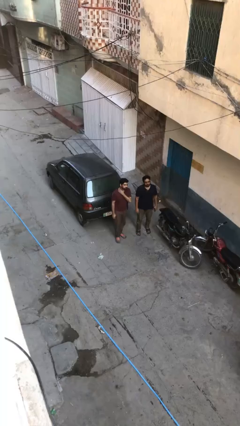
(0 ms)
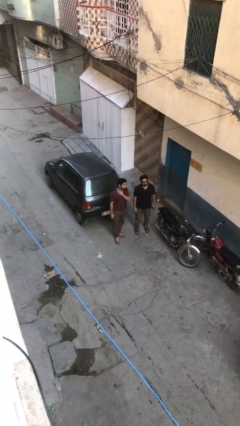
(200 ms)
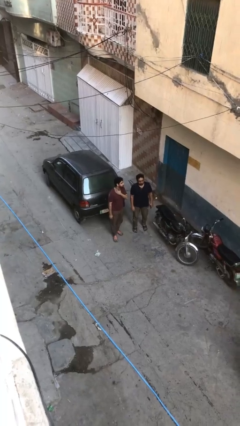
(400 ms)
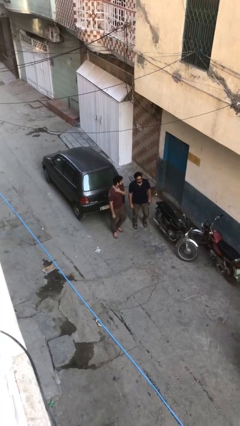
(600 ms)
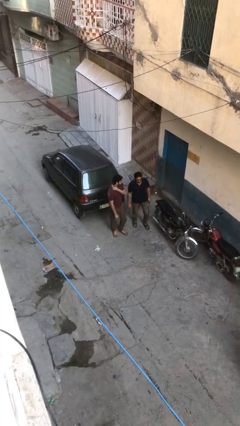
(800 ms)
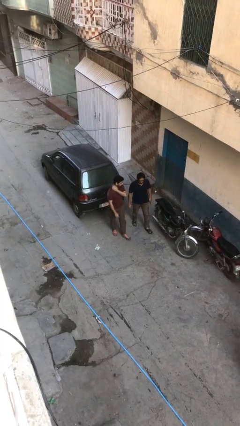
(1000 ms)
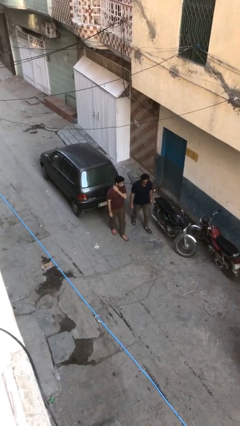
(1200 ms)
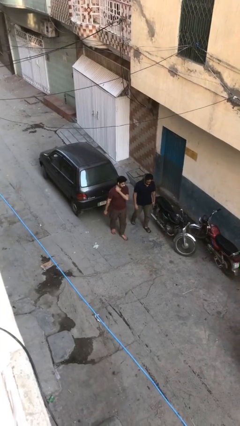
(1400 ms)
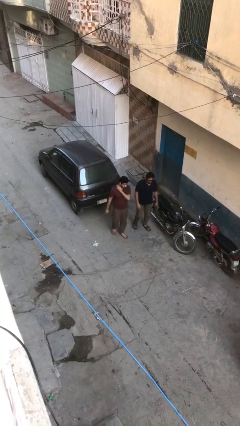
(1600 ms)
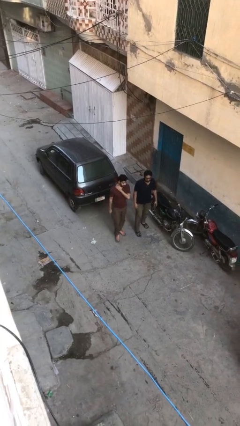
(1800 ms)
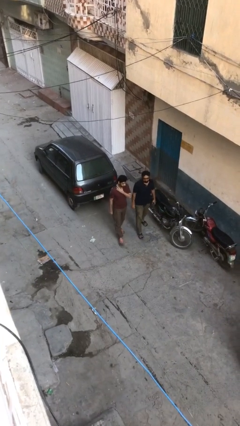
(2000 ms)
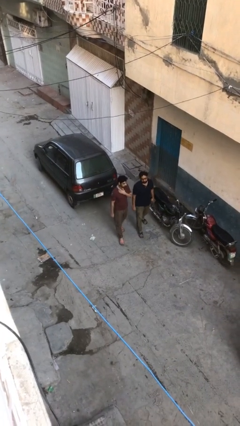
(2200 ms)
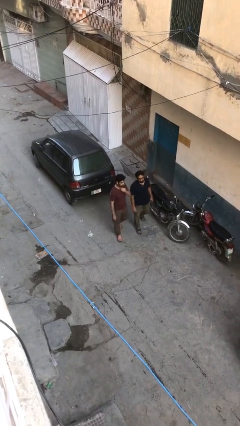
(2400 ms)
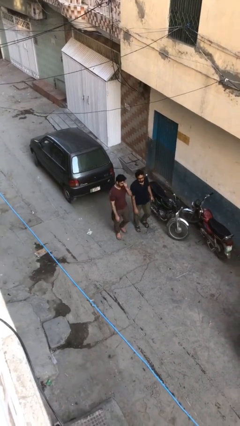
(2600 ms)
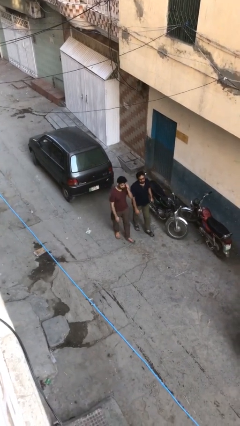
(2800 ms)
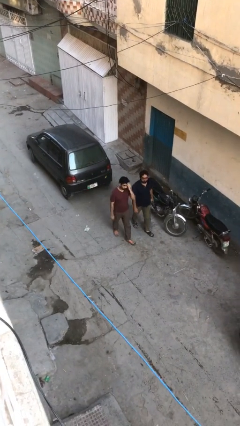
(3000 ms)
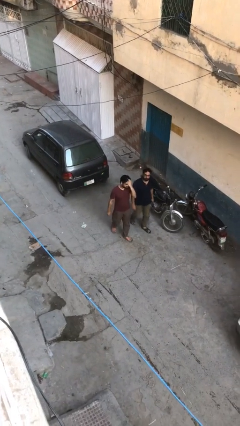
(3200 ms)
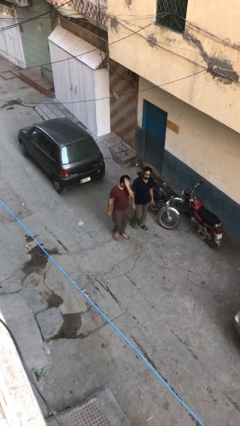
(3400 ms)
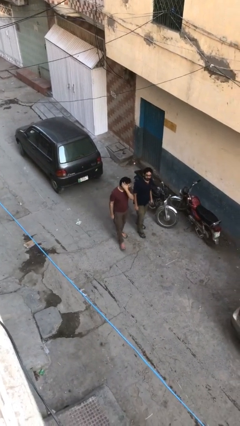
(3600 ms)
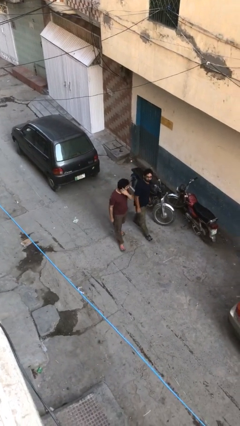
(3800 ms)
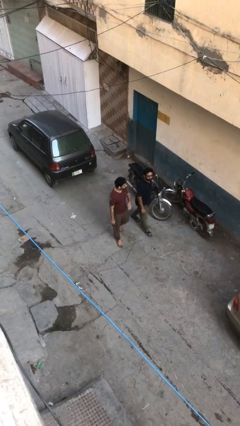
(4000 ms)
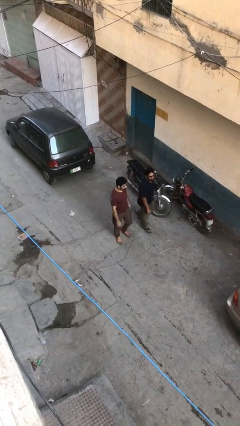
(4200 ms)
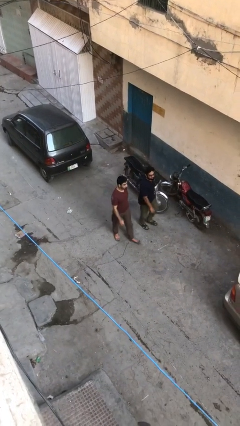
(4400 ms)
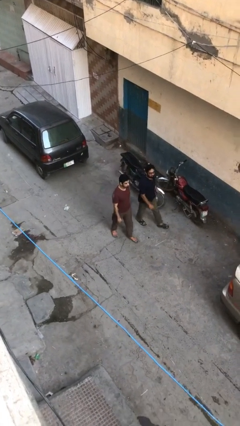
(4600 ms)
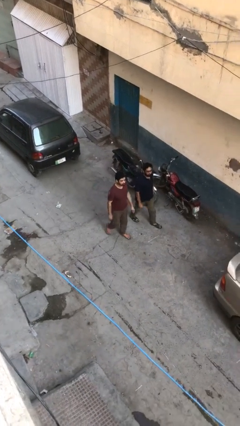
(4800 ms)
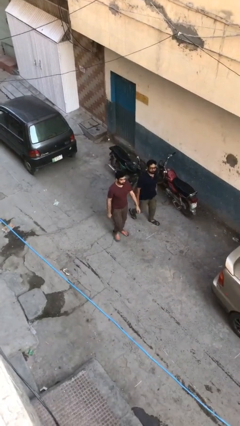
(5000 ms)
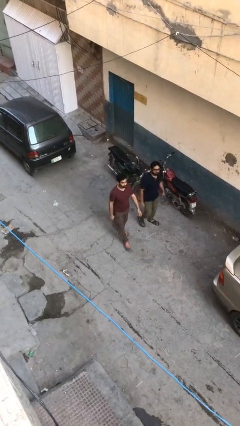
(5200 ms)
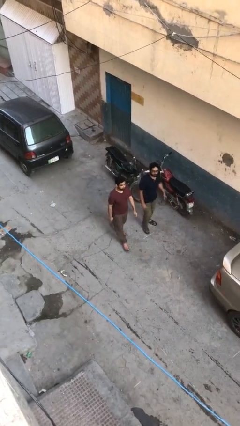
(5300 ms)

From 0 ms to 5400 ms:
person talks to person

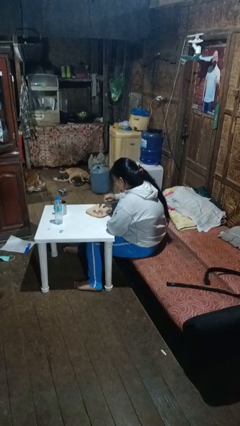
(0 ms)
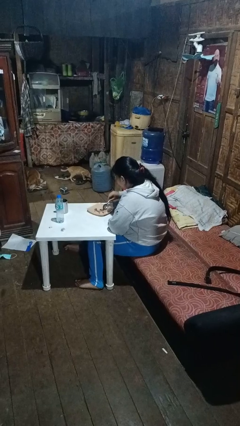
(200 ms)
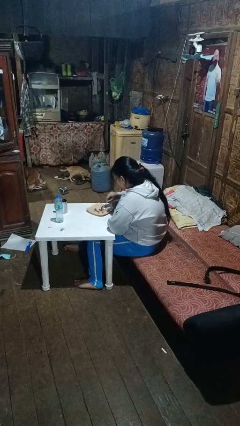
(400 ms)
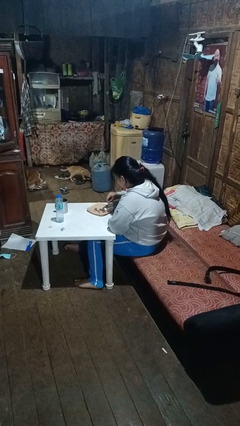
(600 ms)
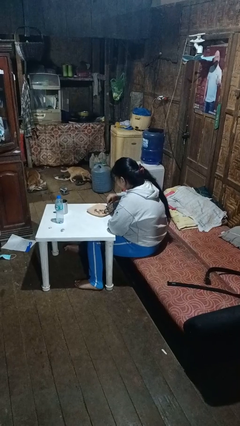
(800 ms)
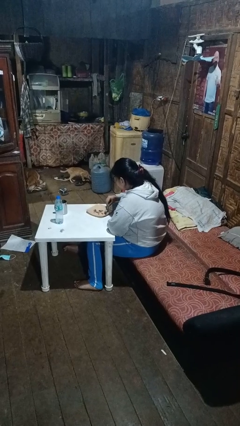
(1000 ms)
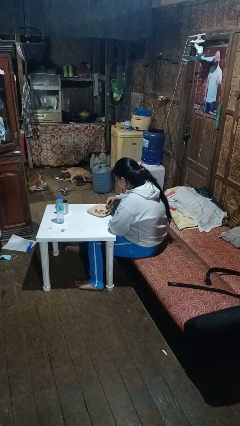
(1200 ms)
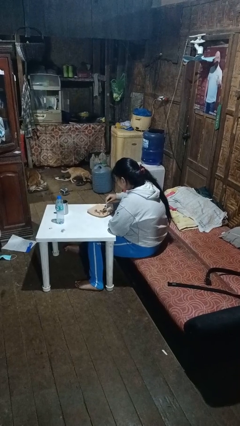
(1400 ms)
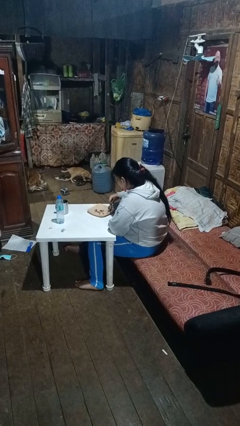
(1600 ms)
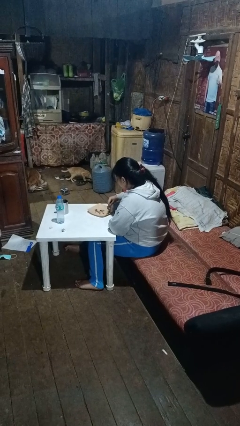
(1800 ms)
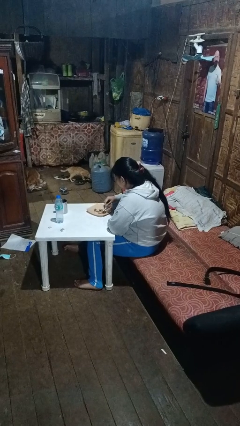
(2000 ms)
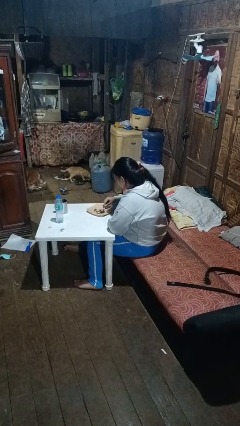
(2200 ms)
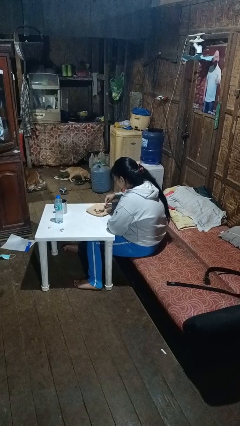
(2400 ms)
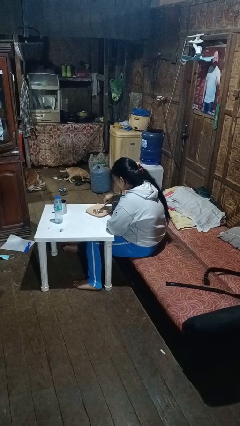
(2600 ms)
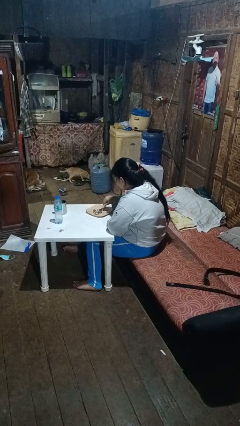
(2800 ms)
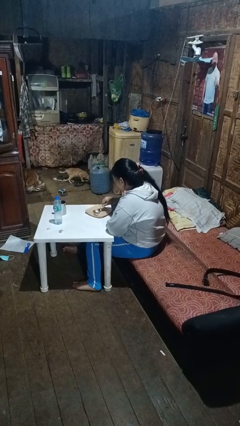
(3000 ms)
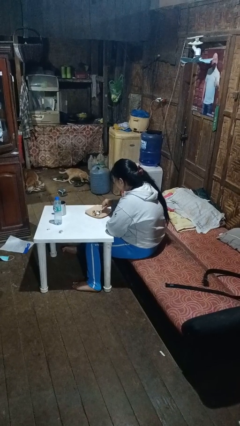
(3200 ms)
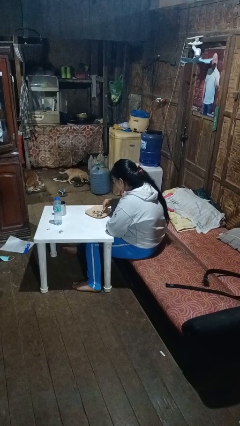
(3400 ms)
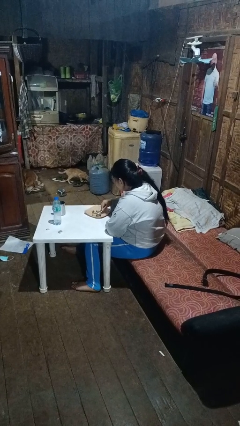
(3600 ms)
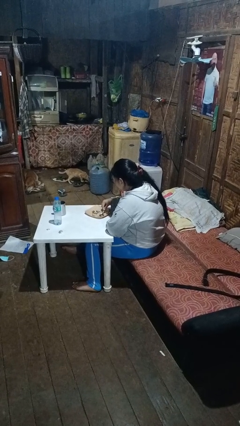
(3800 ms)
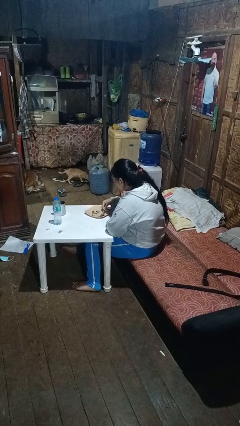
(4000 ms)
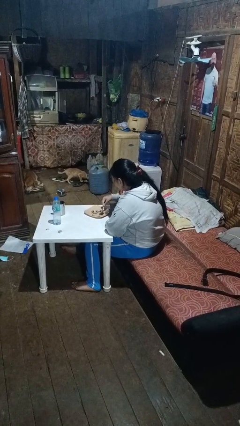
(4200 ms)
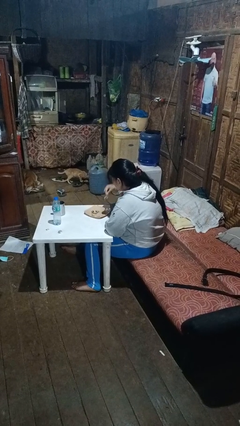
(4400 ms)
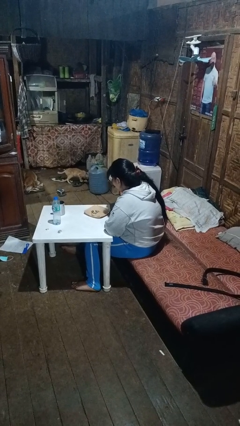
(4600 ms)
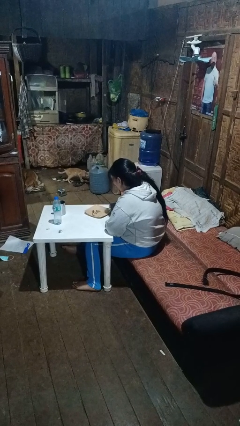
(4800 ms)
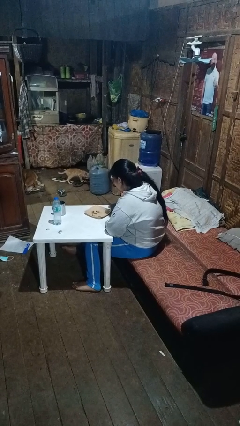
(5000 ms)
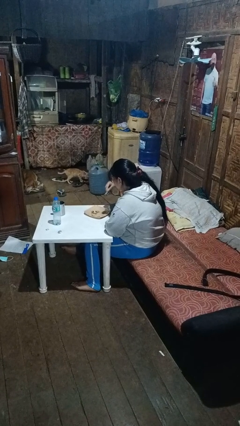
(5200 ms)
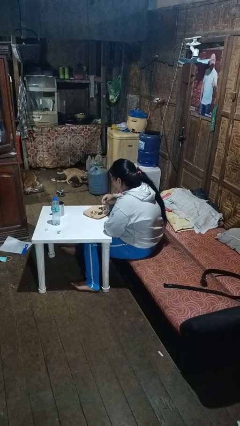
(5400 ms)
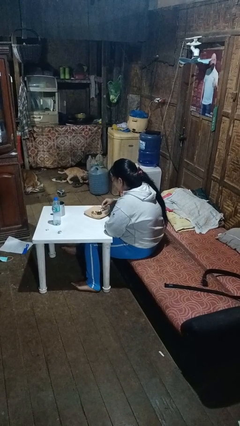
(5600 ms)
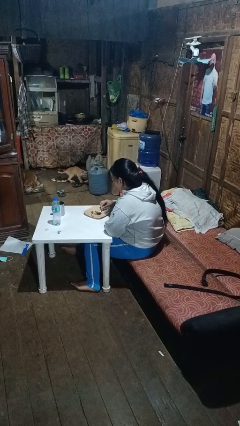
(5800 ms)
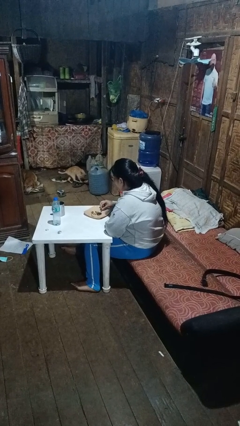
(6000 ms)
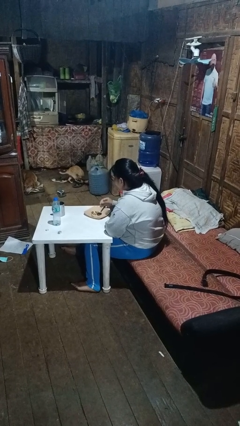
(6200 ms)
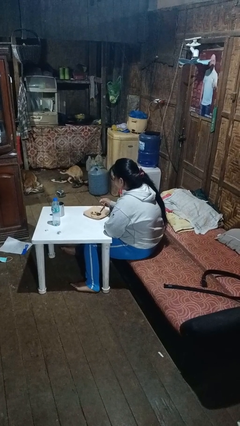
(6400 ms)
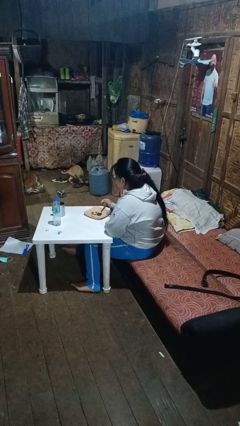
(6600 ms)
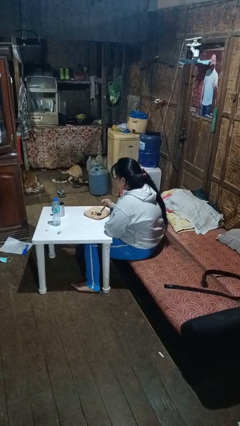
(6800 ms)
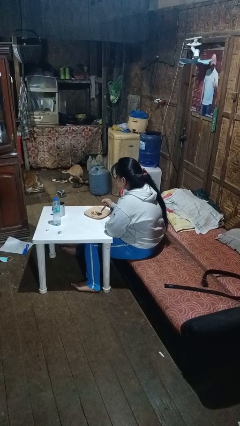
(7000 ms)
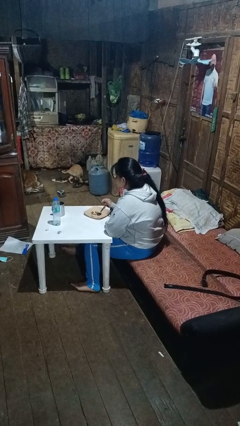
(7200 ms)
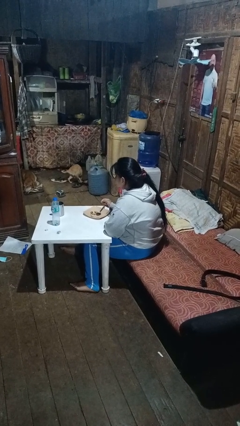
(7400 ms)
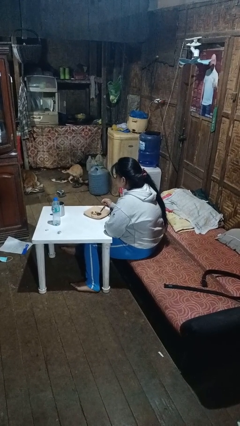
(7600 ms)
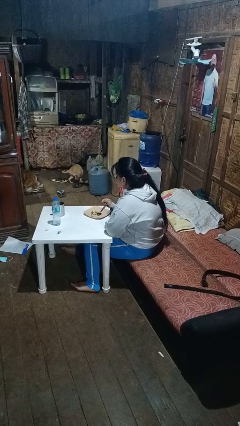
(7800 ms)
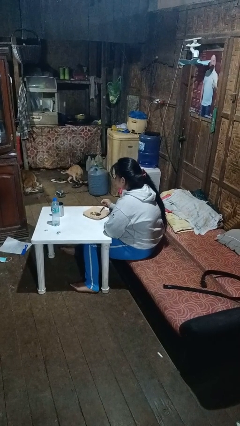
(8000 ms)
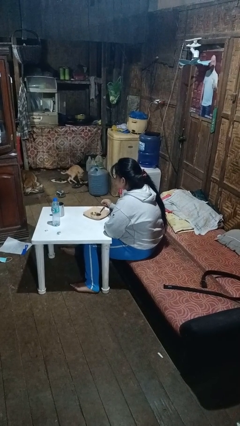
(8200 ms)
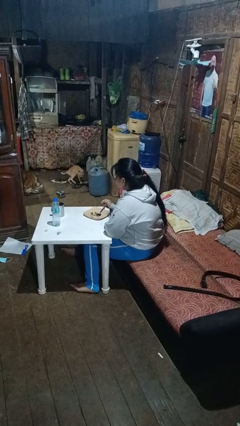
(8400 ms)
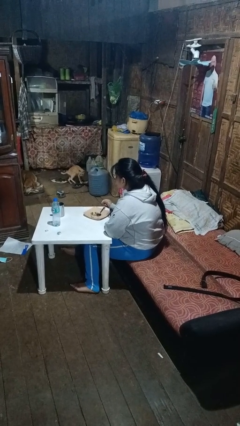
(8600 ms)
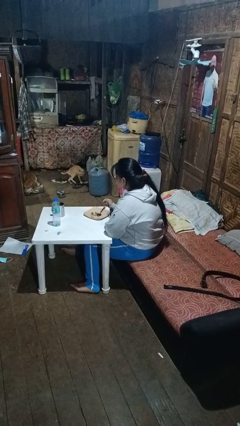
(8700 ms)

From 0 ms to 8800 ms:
person eats with utensil

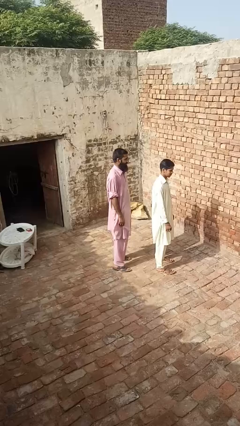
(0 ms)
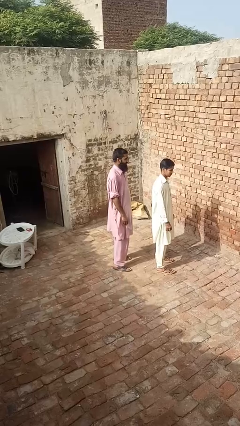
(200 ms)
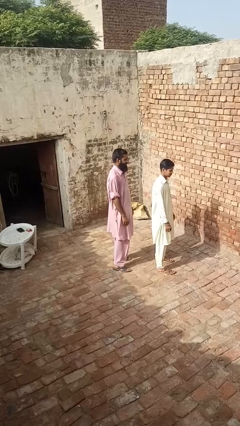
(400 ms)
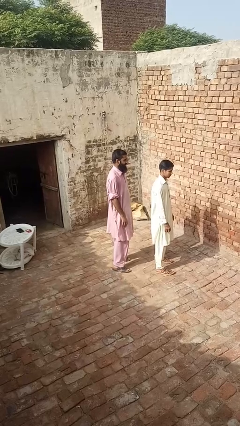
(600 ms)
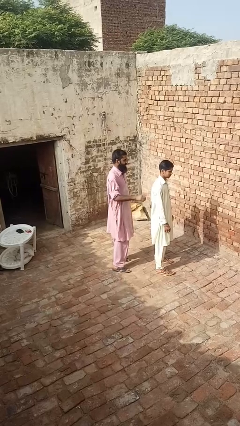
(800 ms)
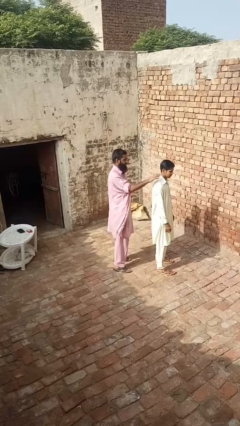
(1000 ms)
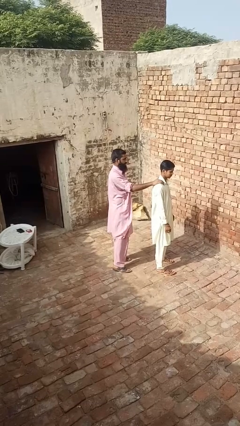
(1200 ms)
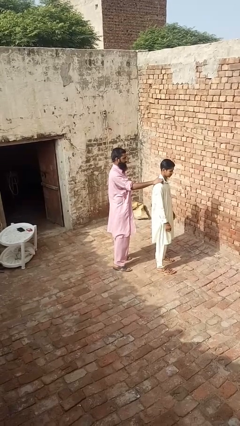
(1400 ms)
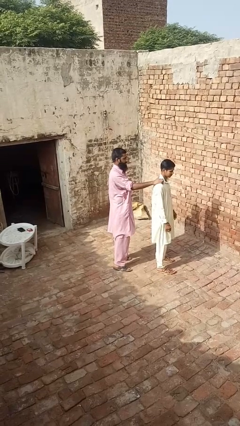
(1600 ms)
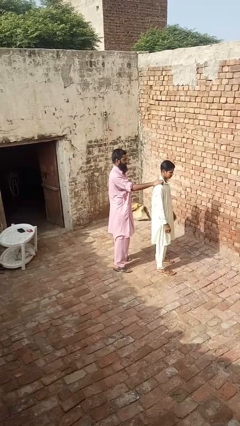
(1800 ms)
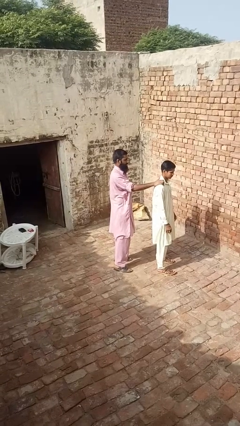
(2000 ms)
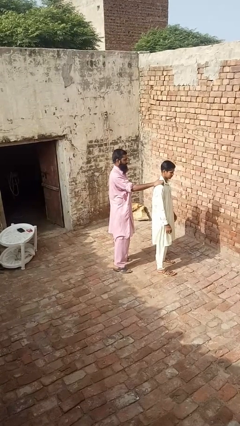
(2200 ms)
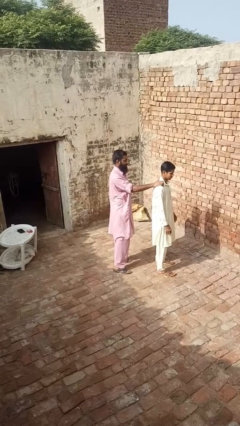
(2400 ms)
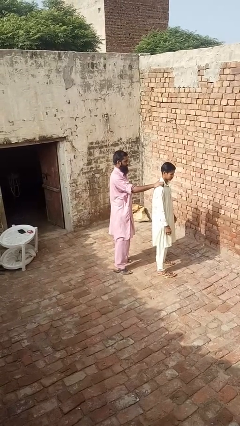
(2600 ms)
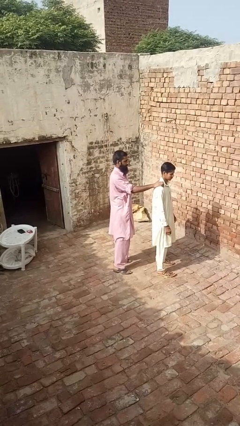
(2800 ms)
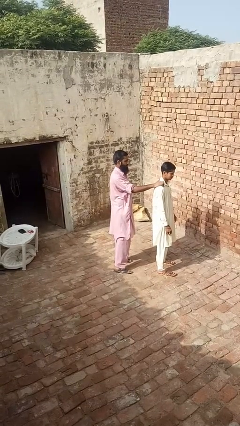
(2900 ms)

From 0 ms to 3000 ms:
person grabs person by shoulder

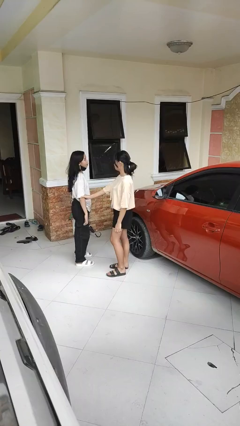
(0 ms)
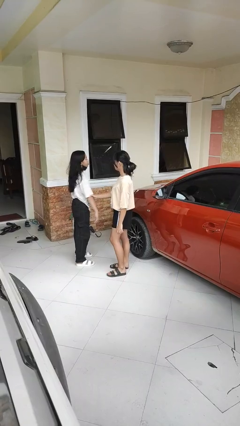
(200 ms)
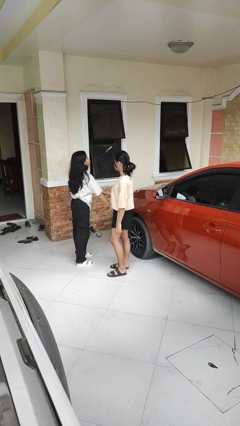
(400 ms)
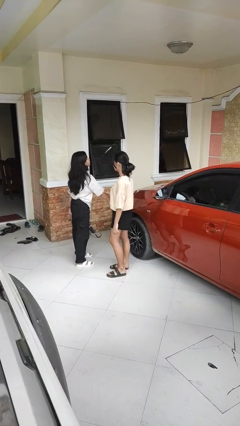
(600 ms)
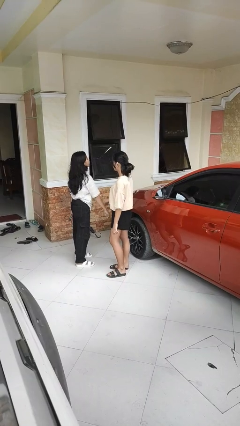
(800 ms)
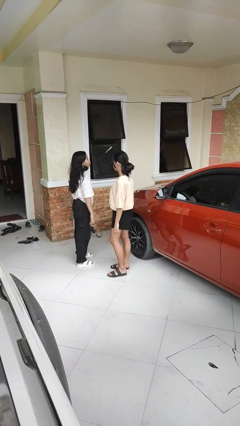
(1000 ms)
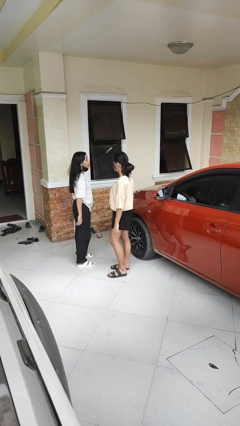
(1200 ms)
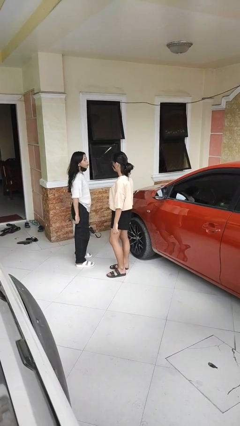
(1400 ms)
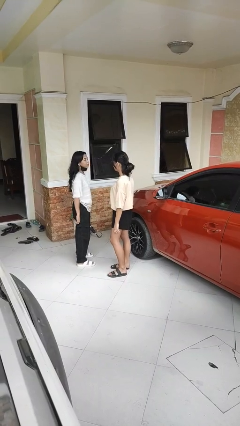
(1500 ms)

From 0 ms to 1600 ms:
person grabs person by forearm
